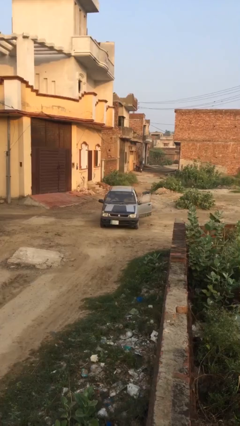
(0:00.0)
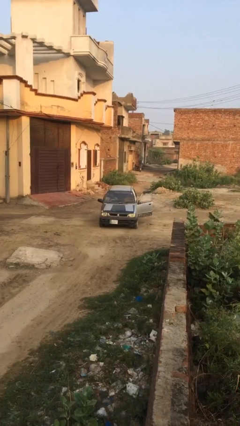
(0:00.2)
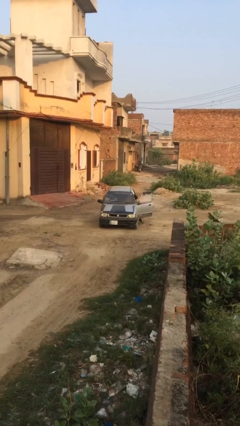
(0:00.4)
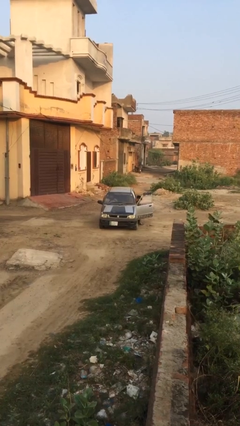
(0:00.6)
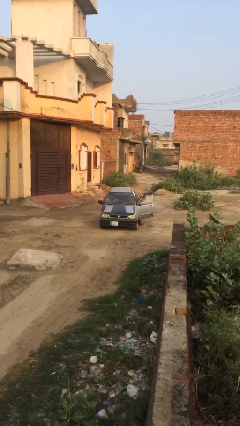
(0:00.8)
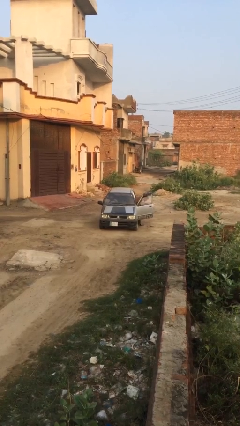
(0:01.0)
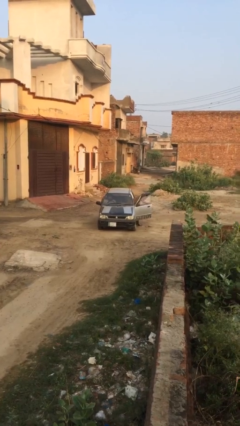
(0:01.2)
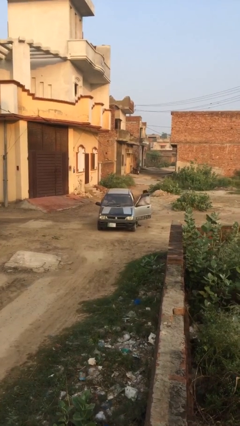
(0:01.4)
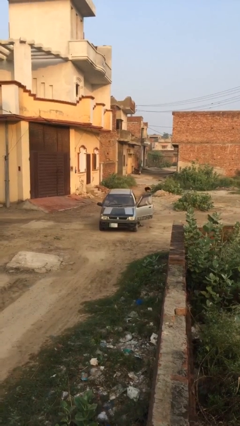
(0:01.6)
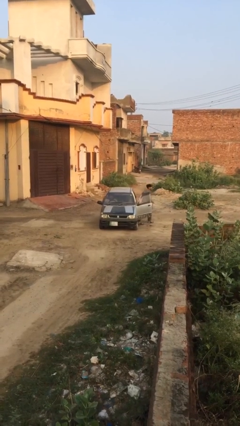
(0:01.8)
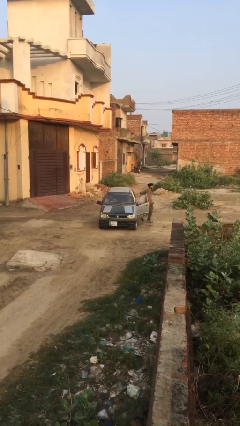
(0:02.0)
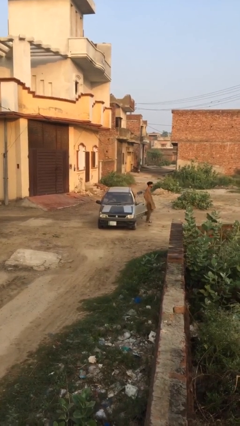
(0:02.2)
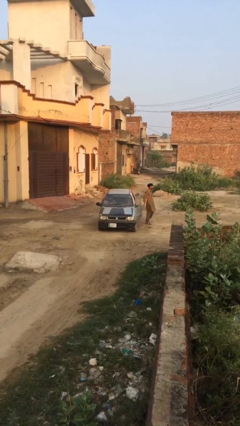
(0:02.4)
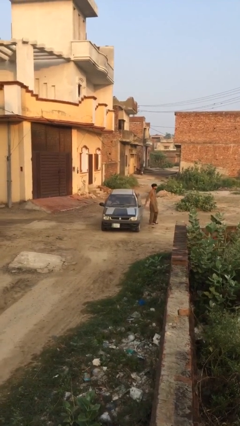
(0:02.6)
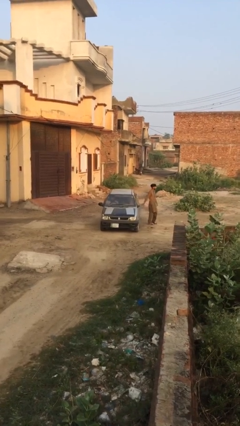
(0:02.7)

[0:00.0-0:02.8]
car drops off person

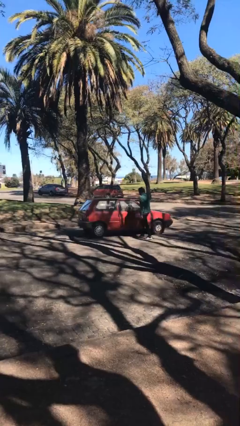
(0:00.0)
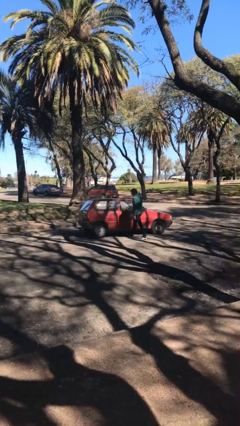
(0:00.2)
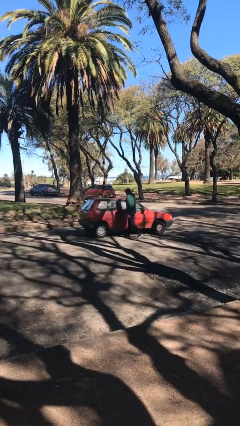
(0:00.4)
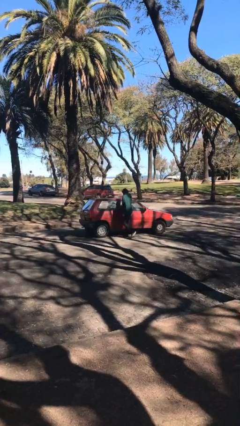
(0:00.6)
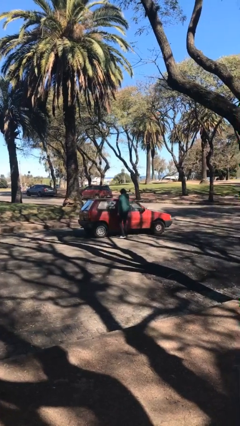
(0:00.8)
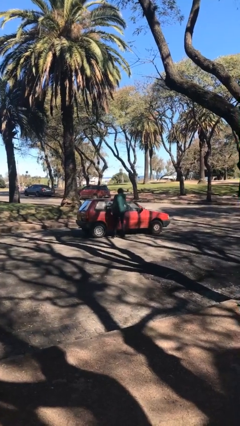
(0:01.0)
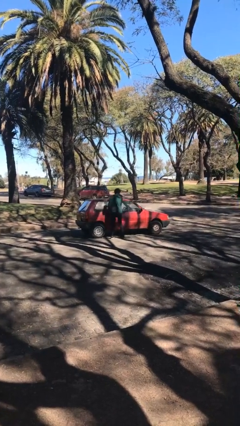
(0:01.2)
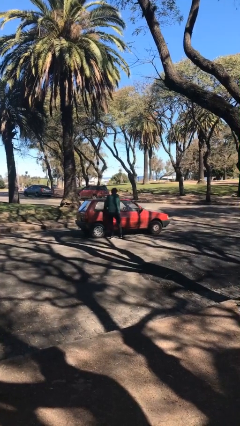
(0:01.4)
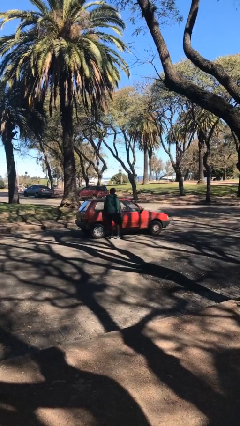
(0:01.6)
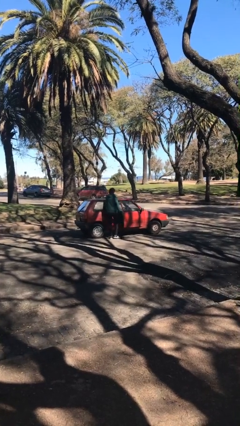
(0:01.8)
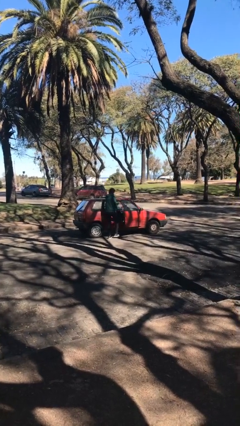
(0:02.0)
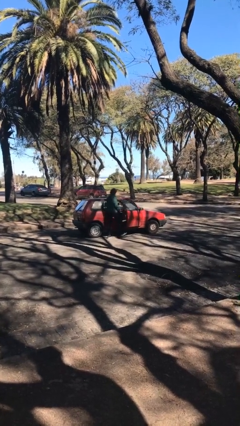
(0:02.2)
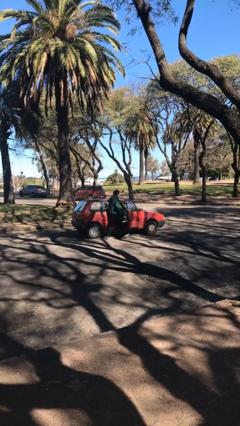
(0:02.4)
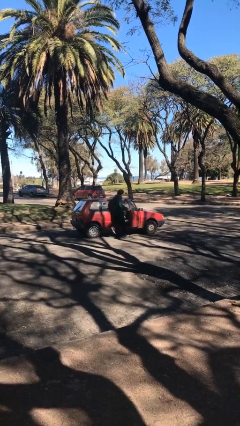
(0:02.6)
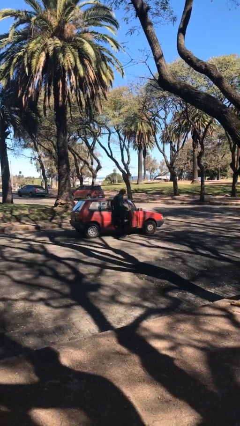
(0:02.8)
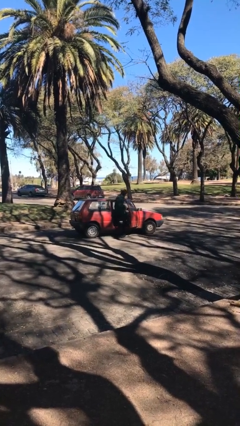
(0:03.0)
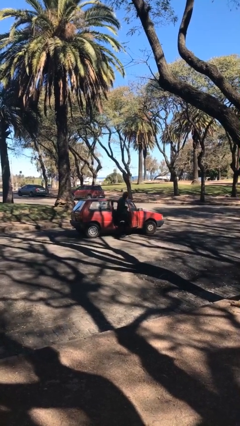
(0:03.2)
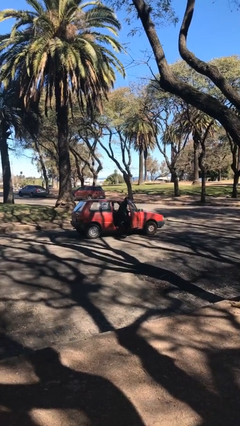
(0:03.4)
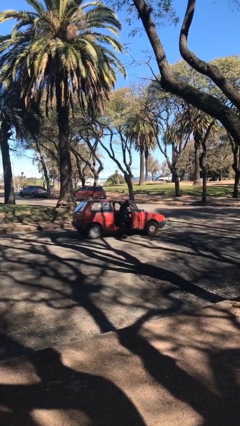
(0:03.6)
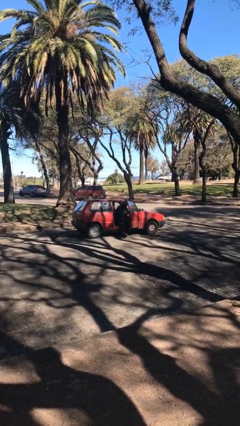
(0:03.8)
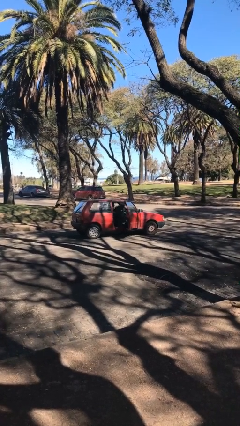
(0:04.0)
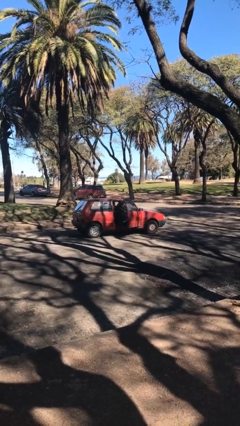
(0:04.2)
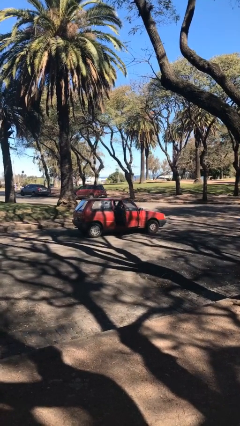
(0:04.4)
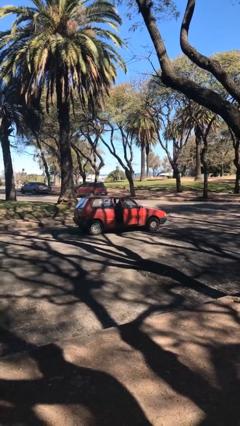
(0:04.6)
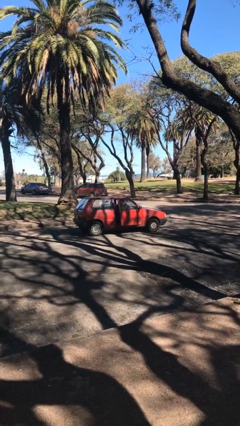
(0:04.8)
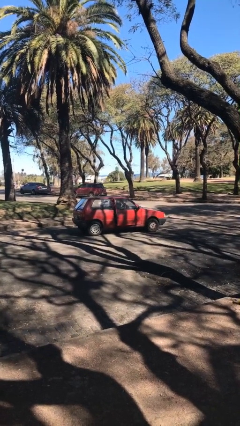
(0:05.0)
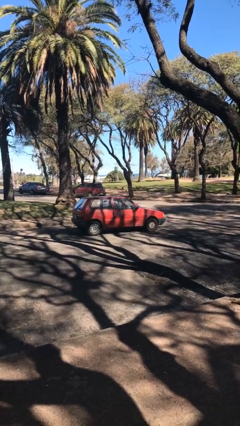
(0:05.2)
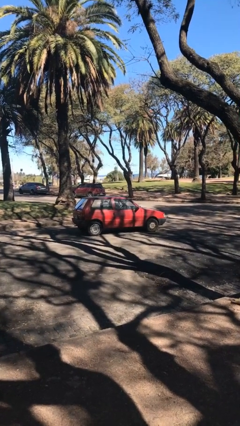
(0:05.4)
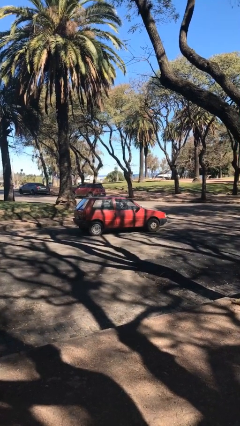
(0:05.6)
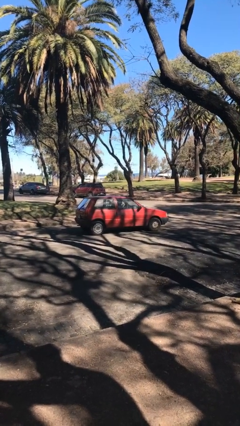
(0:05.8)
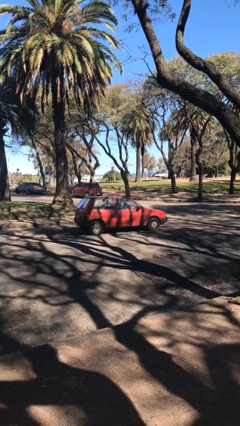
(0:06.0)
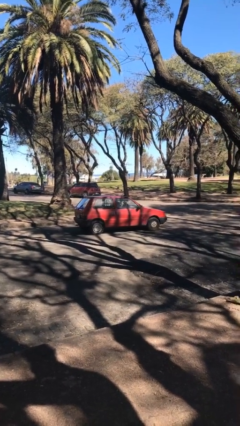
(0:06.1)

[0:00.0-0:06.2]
car picks up person

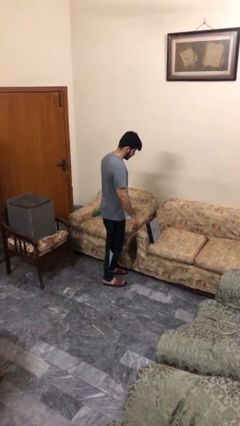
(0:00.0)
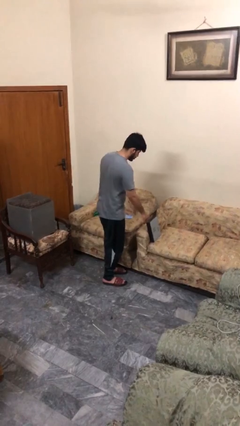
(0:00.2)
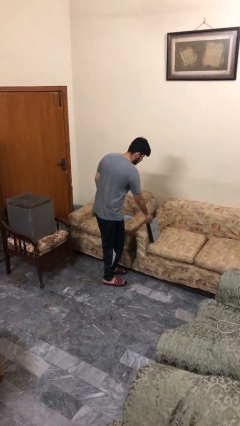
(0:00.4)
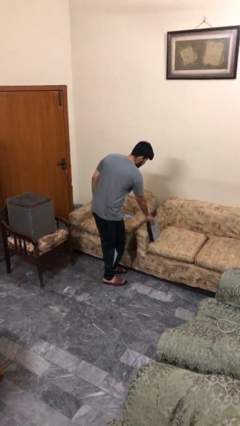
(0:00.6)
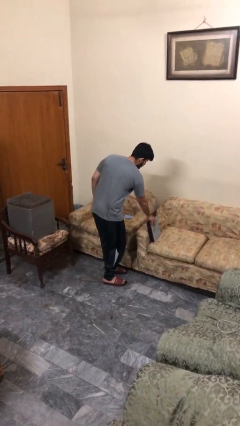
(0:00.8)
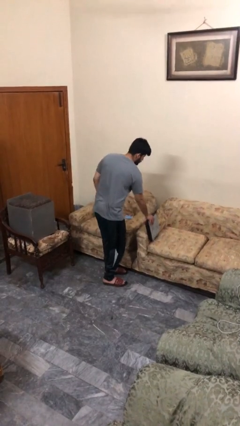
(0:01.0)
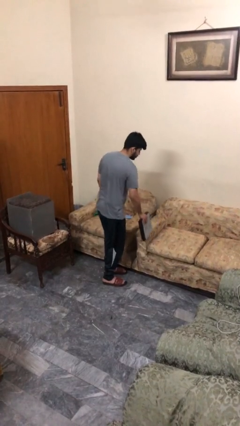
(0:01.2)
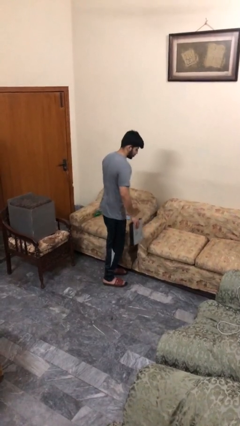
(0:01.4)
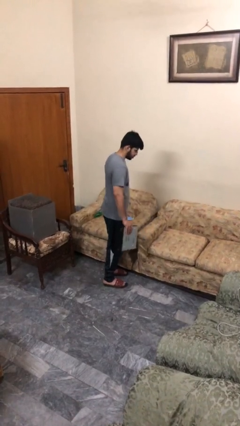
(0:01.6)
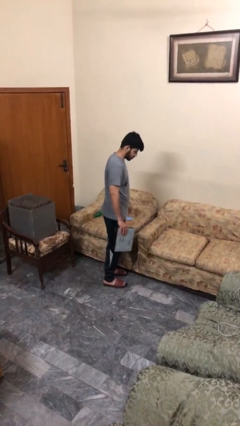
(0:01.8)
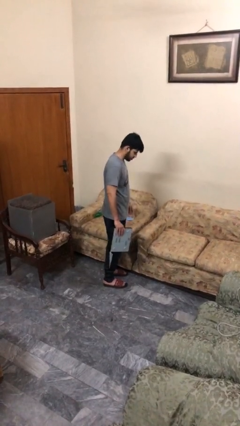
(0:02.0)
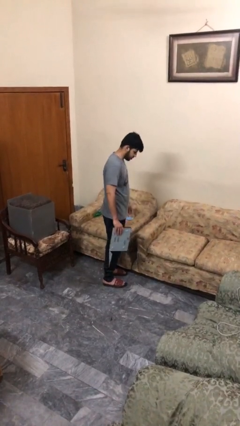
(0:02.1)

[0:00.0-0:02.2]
person picks up object from couch

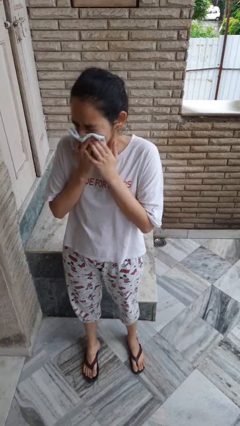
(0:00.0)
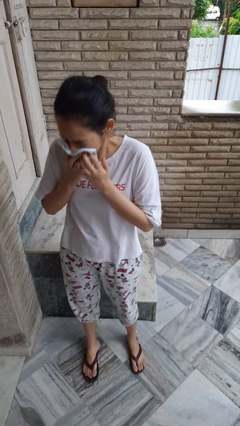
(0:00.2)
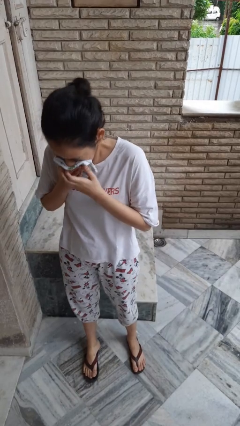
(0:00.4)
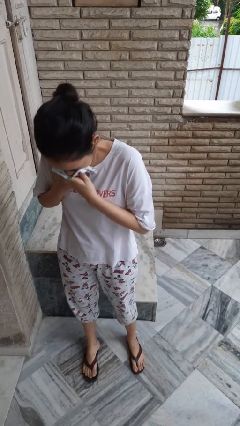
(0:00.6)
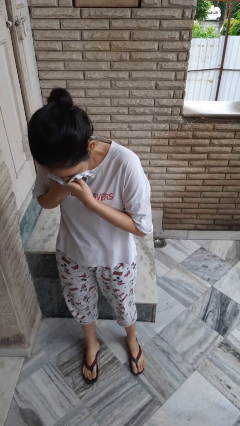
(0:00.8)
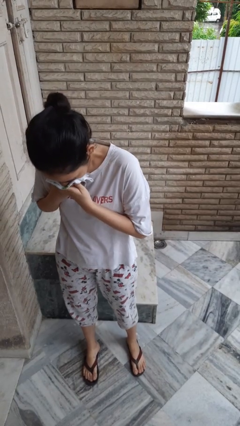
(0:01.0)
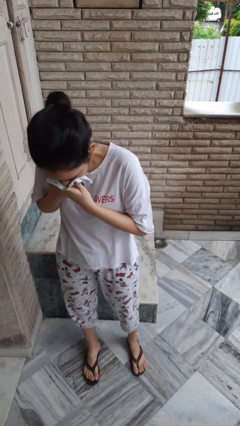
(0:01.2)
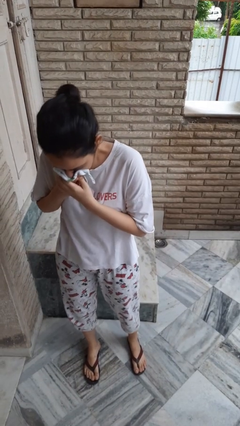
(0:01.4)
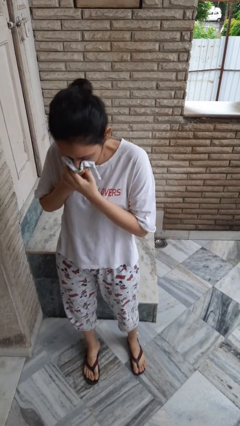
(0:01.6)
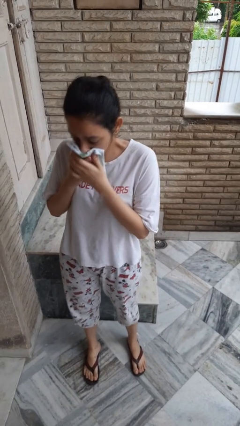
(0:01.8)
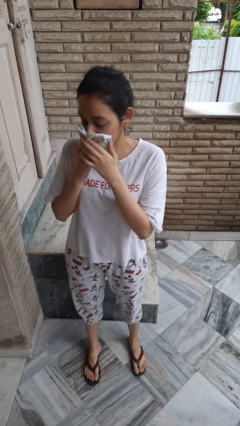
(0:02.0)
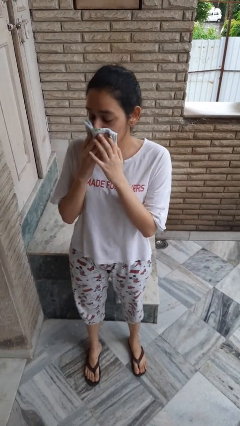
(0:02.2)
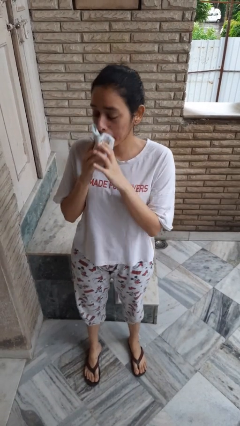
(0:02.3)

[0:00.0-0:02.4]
person blows nose

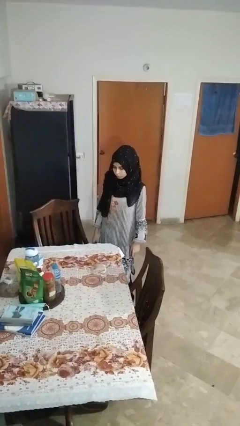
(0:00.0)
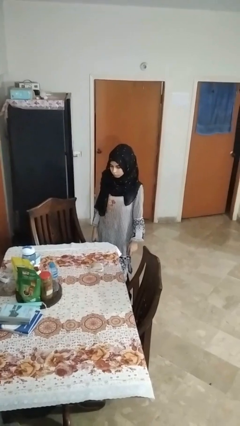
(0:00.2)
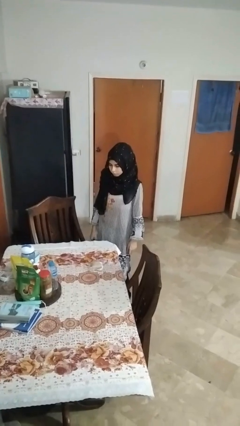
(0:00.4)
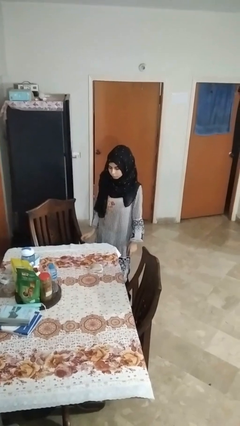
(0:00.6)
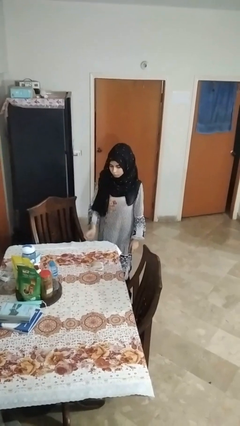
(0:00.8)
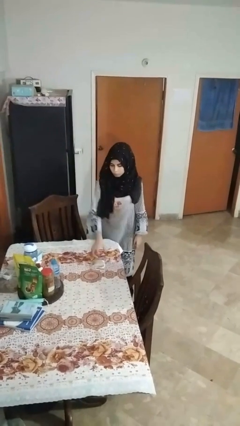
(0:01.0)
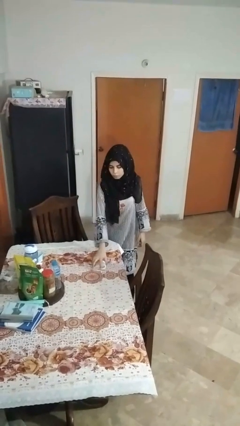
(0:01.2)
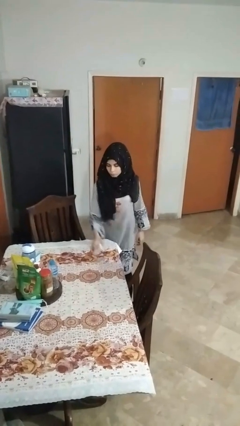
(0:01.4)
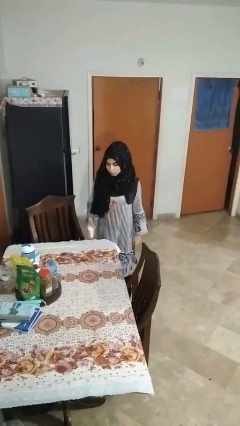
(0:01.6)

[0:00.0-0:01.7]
person picks up object from table

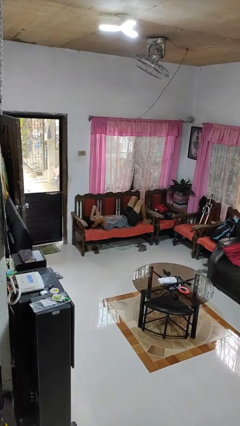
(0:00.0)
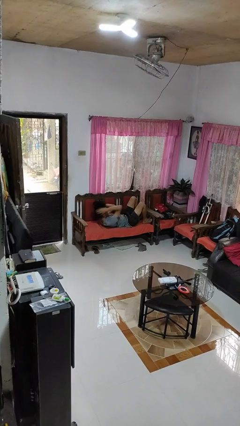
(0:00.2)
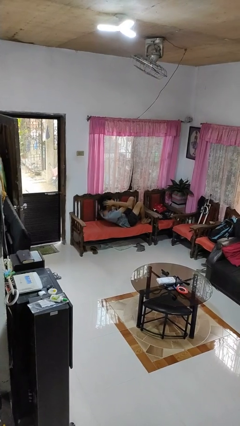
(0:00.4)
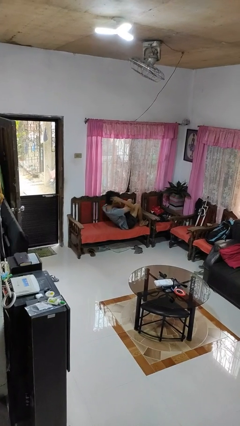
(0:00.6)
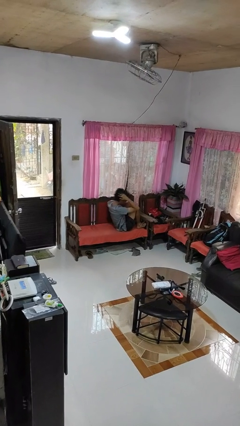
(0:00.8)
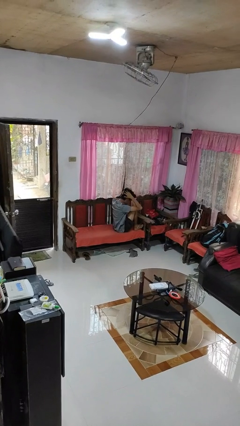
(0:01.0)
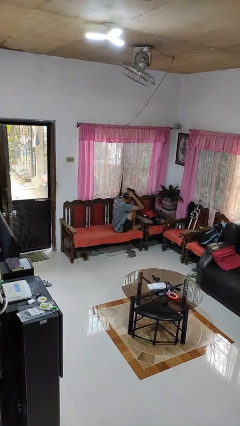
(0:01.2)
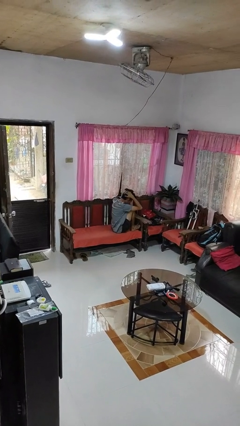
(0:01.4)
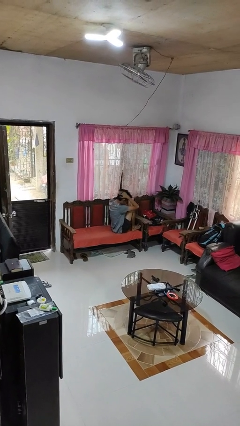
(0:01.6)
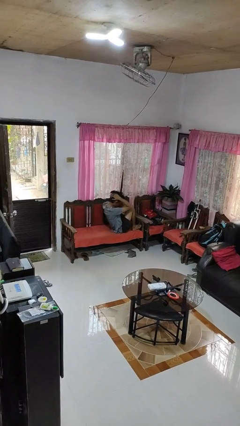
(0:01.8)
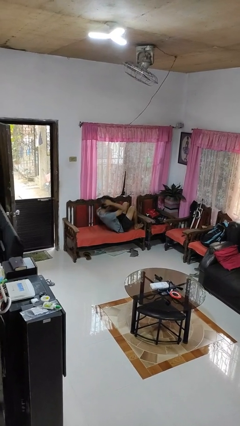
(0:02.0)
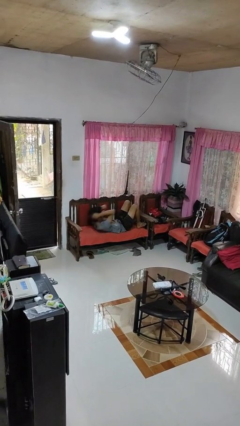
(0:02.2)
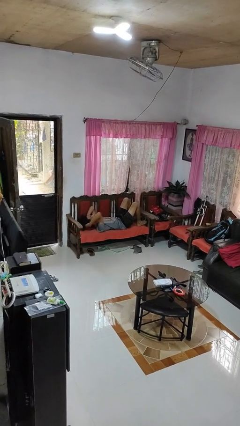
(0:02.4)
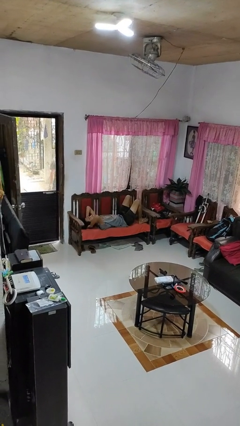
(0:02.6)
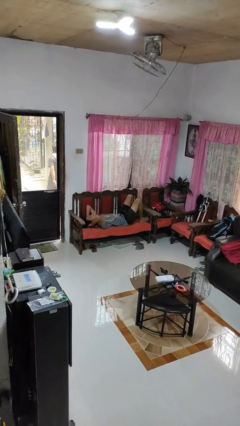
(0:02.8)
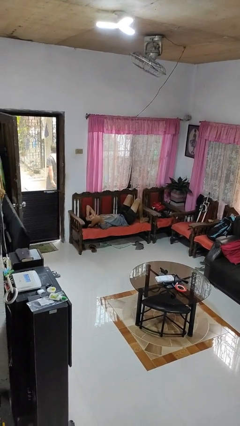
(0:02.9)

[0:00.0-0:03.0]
person exercises with situp
